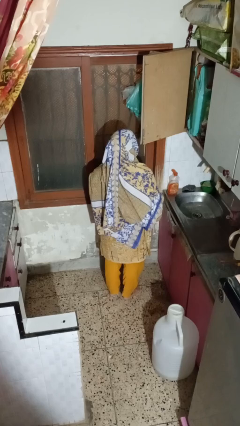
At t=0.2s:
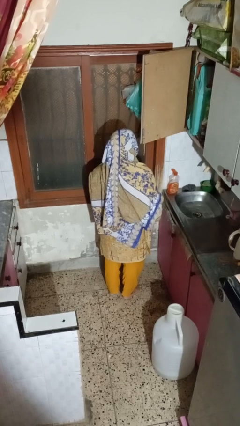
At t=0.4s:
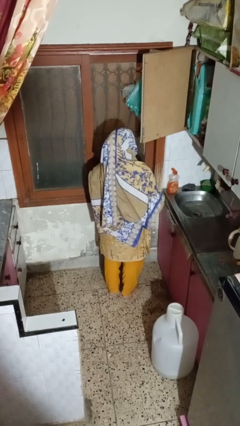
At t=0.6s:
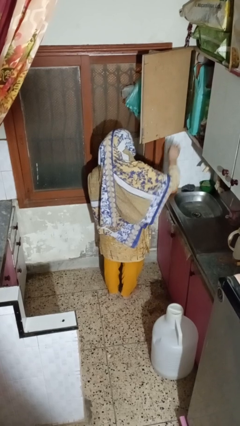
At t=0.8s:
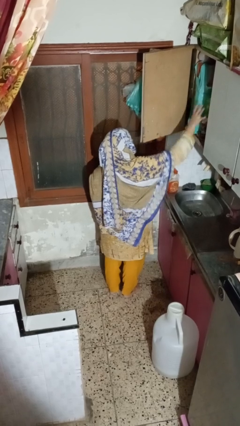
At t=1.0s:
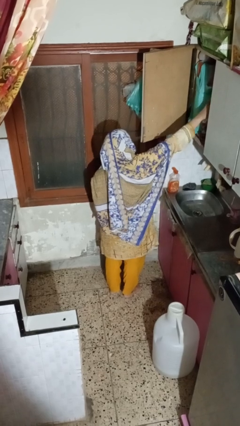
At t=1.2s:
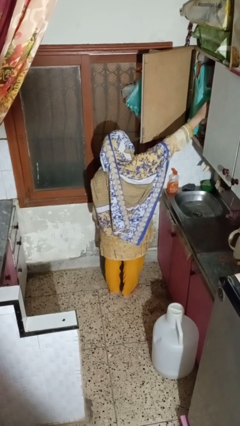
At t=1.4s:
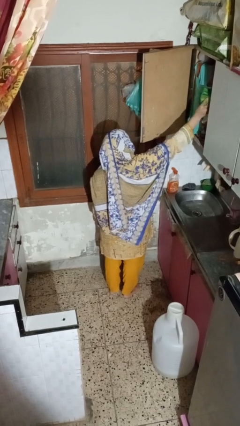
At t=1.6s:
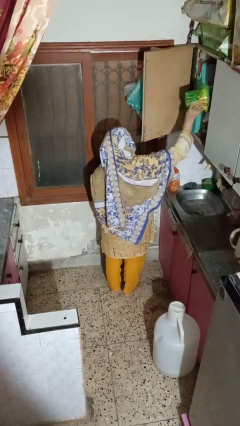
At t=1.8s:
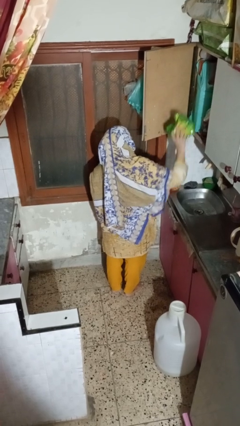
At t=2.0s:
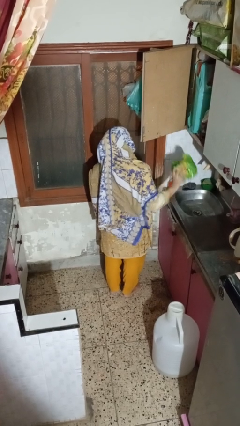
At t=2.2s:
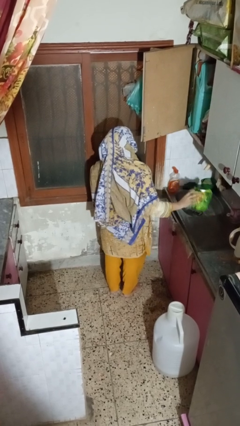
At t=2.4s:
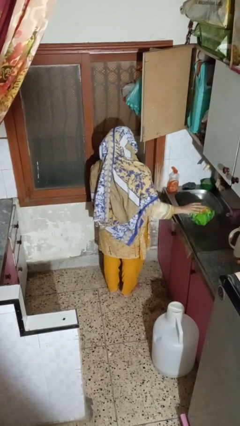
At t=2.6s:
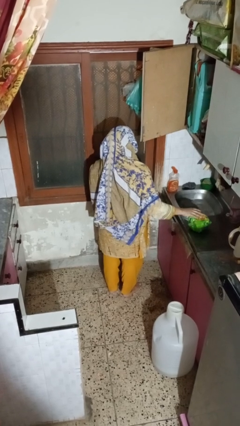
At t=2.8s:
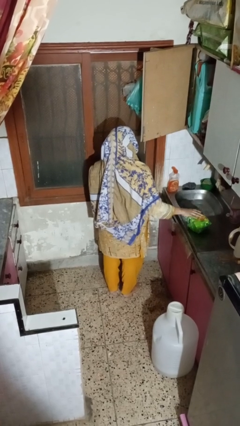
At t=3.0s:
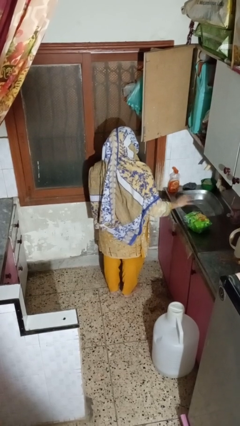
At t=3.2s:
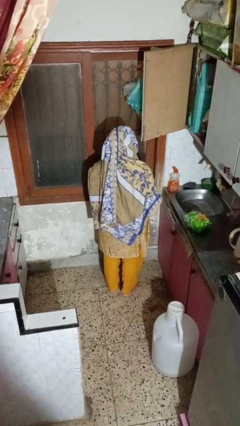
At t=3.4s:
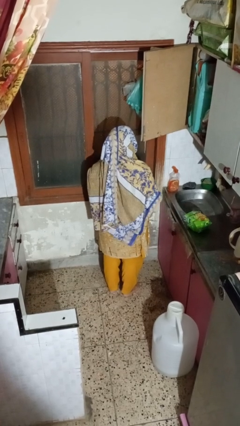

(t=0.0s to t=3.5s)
person takes object from cabinet

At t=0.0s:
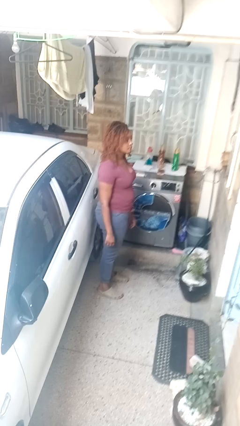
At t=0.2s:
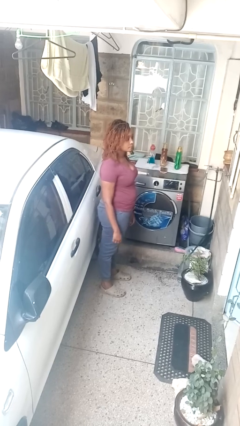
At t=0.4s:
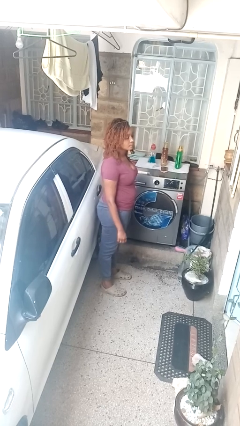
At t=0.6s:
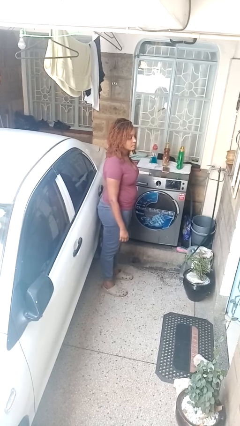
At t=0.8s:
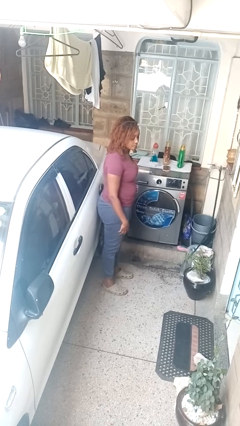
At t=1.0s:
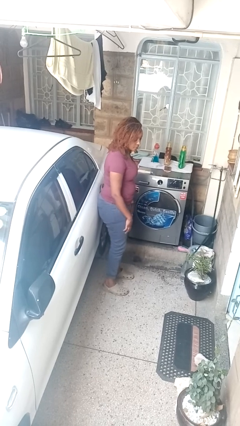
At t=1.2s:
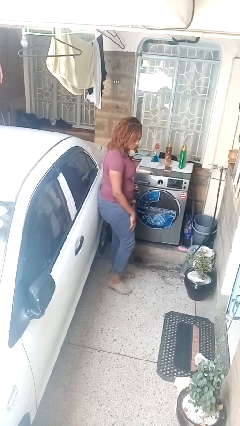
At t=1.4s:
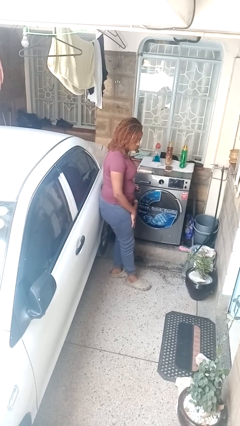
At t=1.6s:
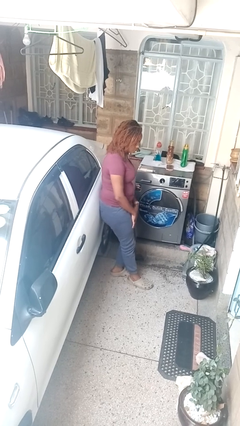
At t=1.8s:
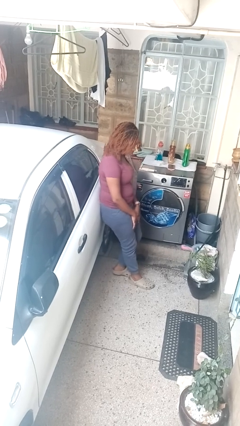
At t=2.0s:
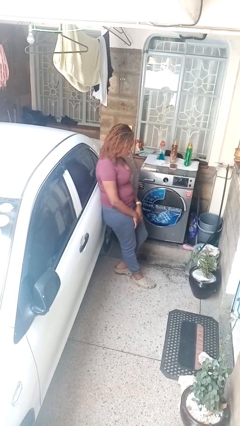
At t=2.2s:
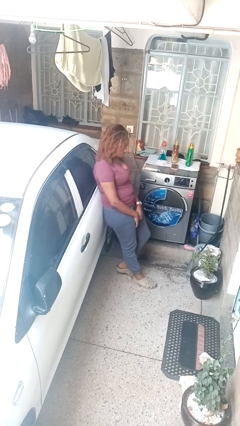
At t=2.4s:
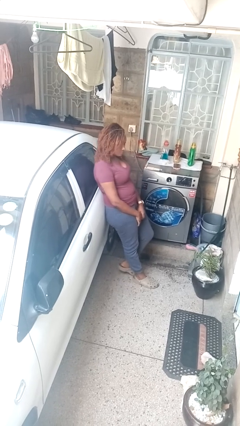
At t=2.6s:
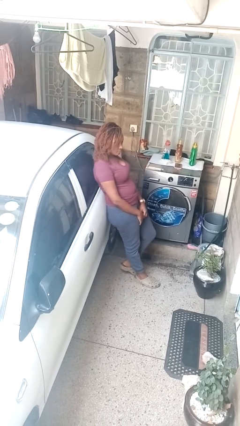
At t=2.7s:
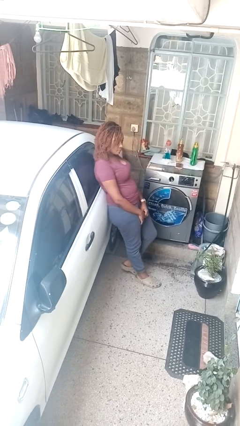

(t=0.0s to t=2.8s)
person leans against car

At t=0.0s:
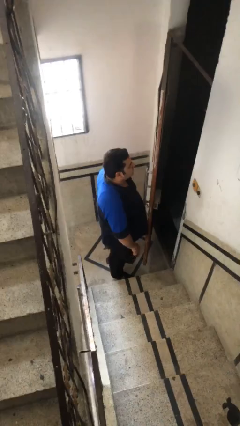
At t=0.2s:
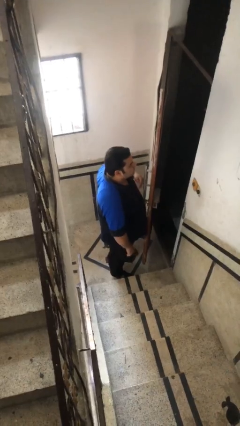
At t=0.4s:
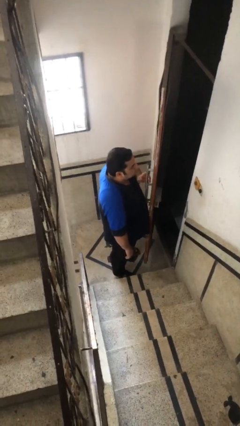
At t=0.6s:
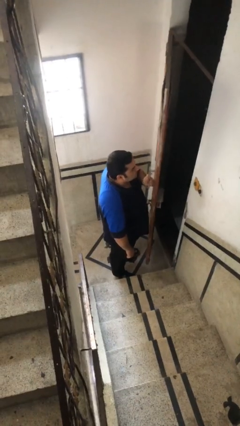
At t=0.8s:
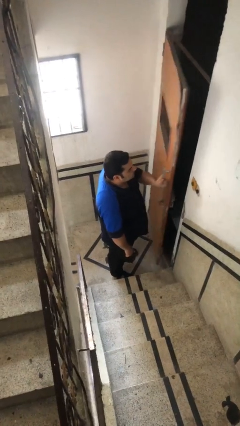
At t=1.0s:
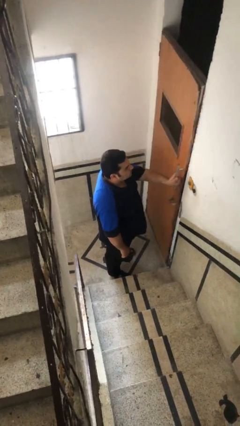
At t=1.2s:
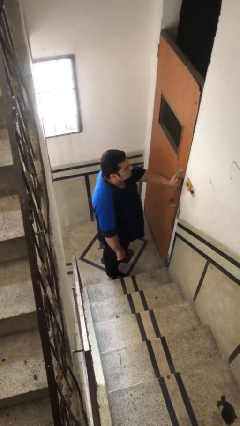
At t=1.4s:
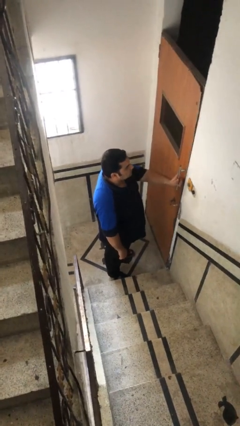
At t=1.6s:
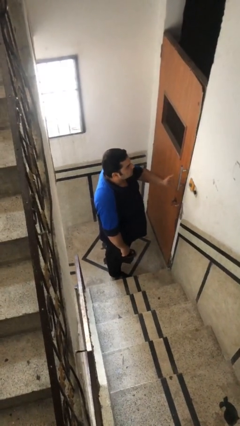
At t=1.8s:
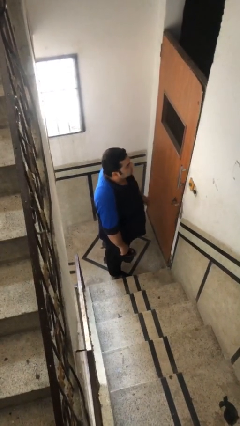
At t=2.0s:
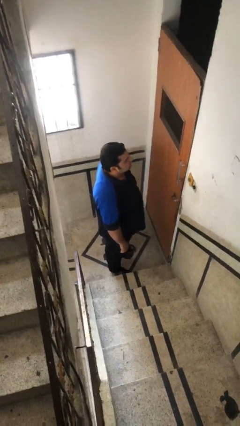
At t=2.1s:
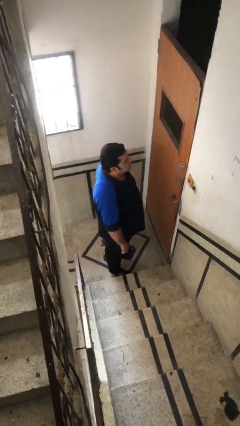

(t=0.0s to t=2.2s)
person closes facility door

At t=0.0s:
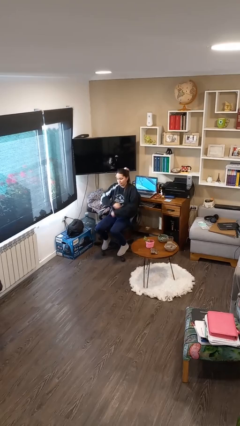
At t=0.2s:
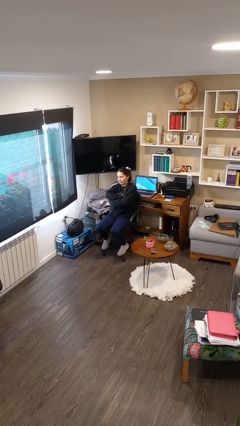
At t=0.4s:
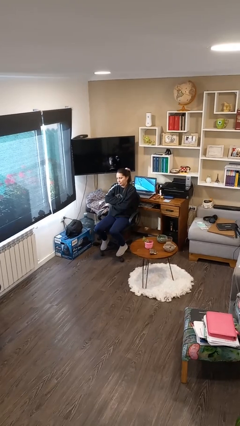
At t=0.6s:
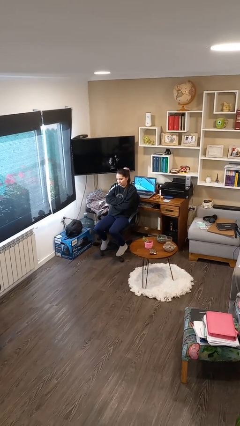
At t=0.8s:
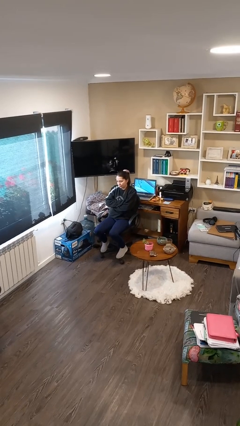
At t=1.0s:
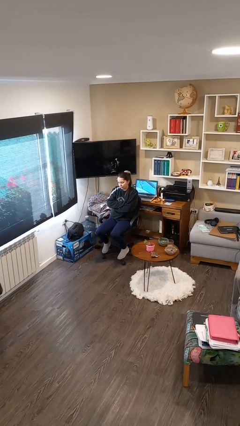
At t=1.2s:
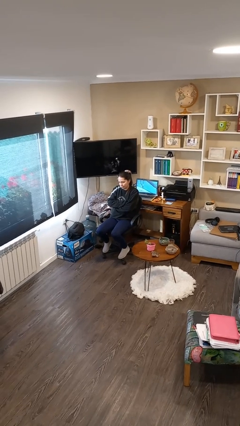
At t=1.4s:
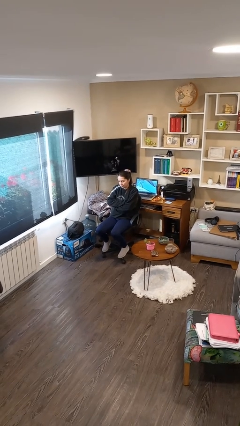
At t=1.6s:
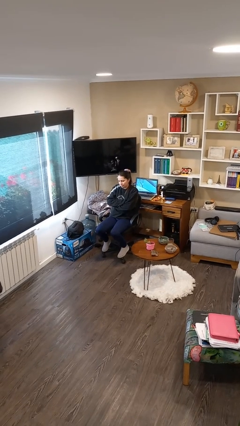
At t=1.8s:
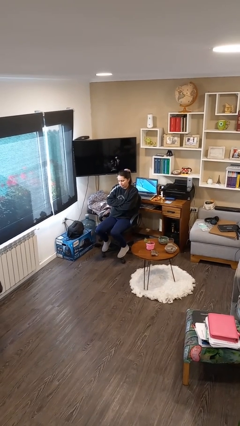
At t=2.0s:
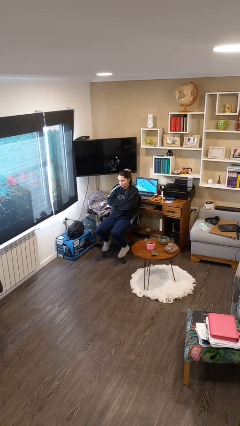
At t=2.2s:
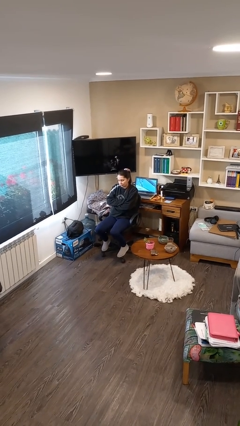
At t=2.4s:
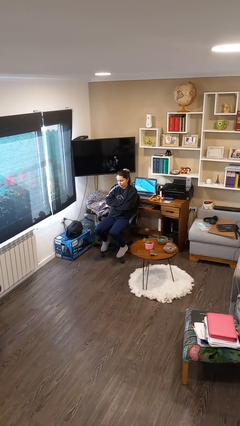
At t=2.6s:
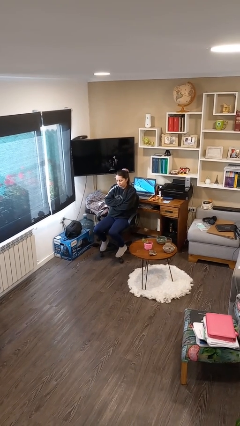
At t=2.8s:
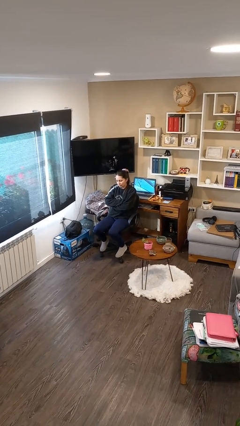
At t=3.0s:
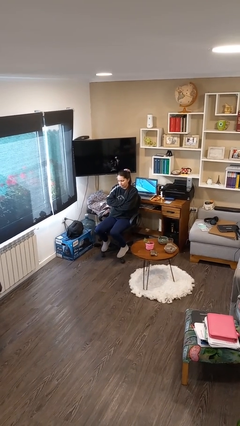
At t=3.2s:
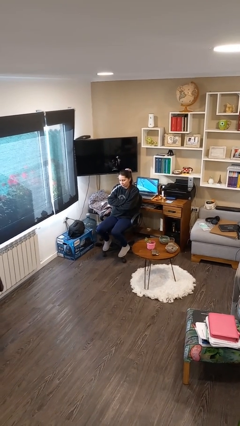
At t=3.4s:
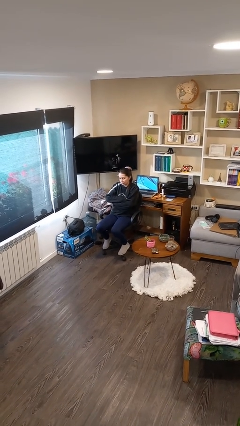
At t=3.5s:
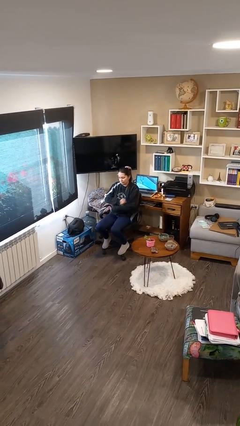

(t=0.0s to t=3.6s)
person crosses arms

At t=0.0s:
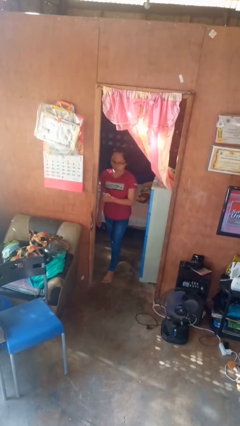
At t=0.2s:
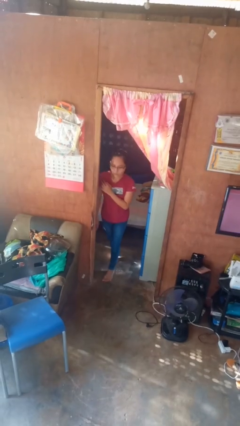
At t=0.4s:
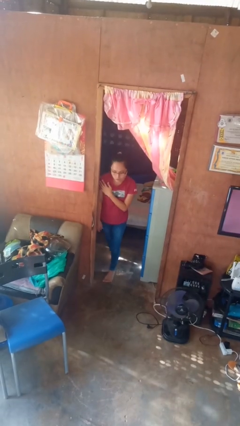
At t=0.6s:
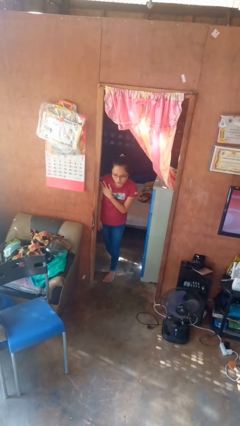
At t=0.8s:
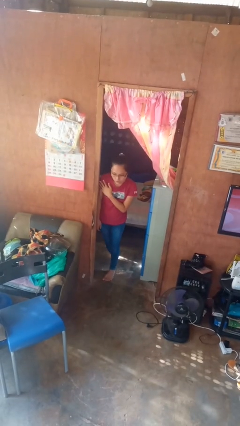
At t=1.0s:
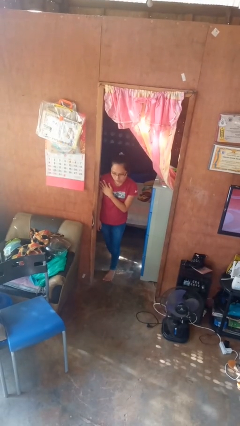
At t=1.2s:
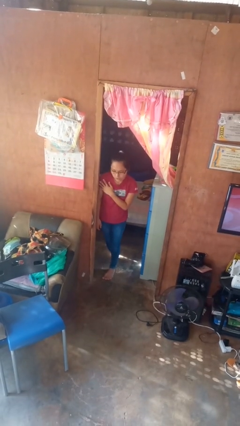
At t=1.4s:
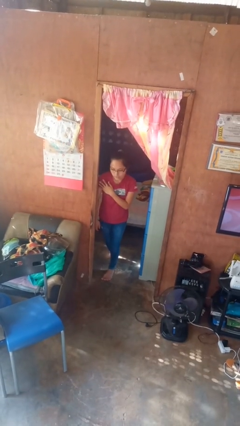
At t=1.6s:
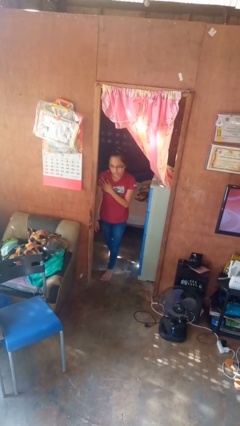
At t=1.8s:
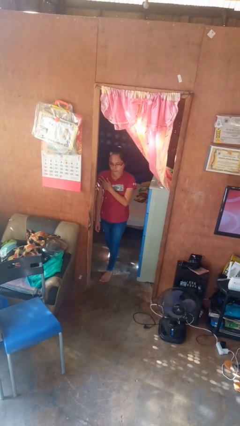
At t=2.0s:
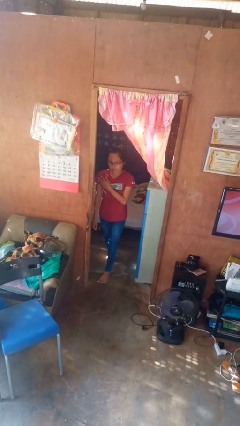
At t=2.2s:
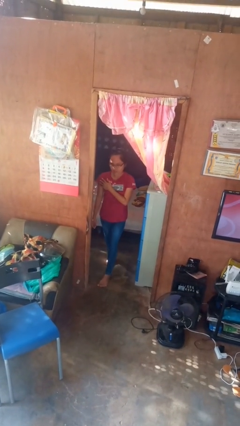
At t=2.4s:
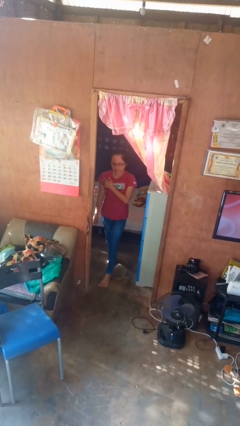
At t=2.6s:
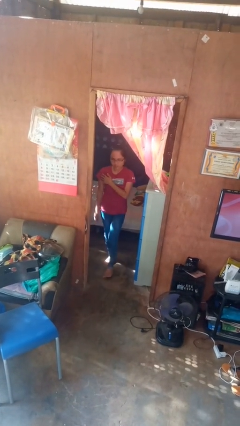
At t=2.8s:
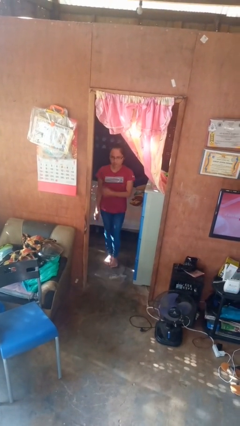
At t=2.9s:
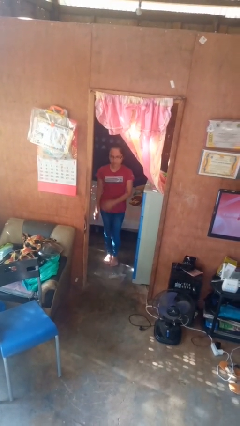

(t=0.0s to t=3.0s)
person bumps into wall

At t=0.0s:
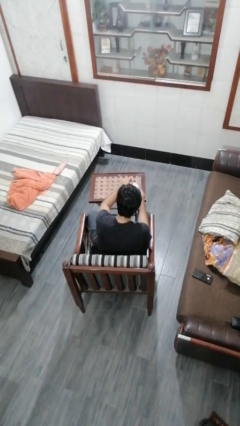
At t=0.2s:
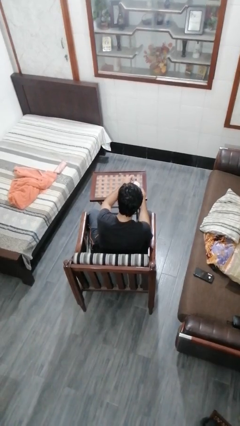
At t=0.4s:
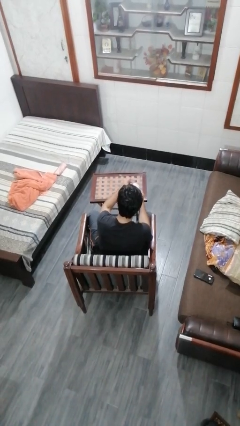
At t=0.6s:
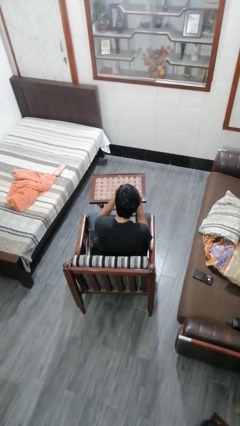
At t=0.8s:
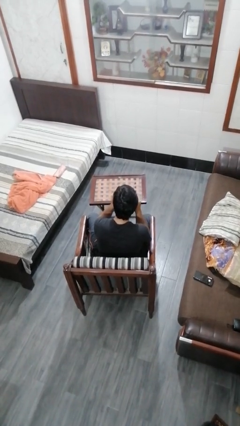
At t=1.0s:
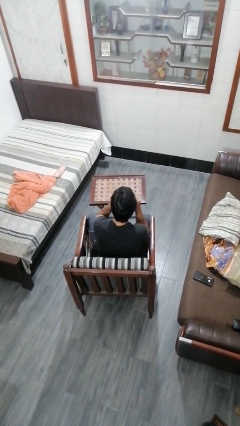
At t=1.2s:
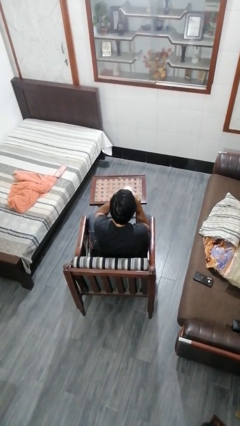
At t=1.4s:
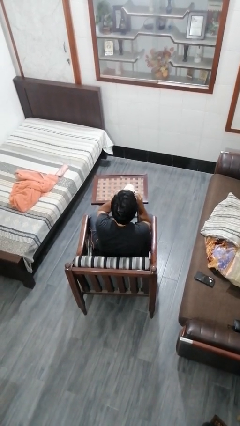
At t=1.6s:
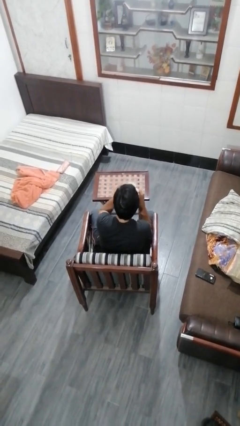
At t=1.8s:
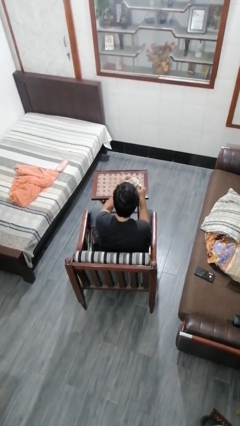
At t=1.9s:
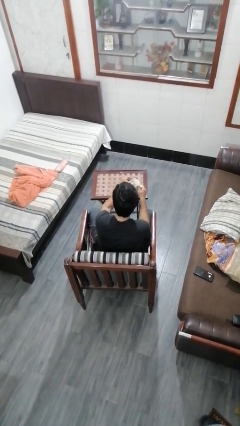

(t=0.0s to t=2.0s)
person drinks from mug
